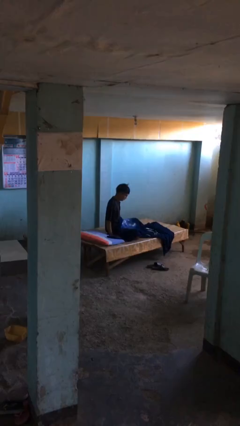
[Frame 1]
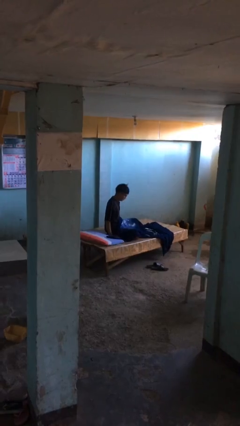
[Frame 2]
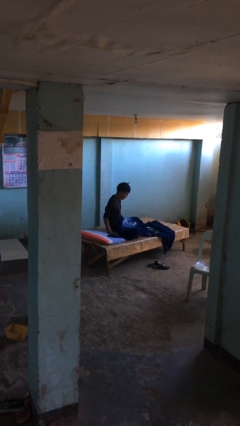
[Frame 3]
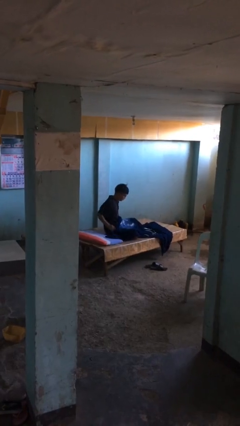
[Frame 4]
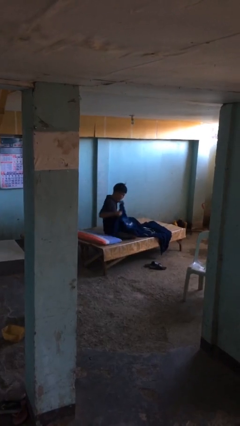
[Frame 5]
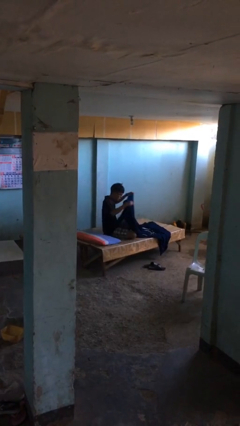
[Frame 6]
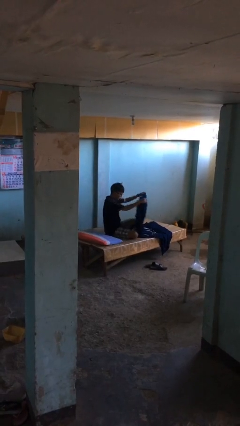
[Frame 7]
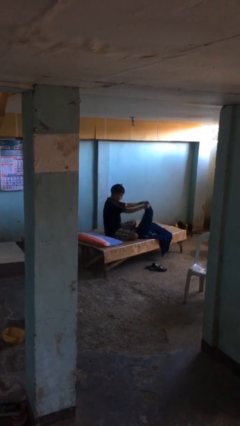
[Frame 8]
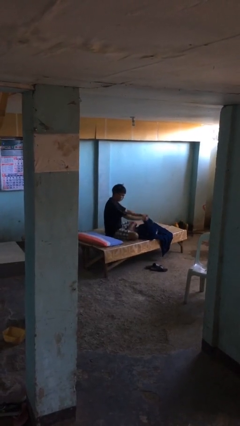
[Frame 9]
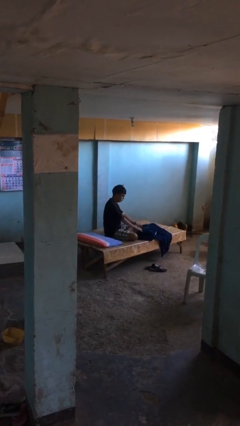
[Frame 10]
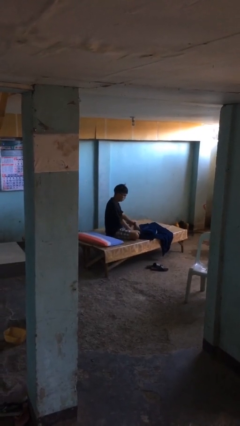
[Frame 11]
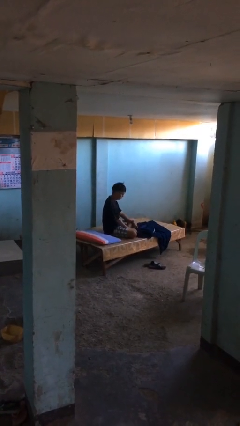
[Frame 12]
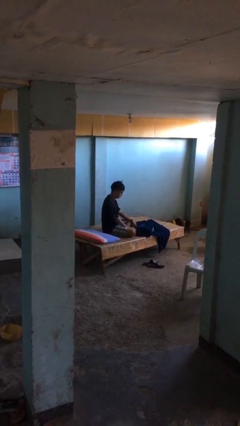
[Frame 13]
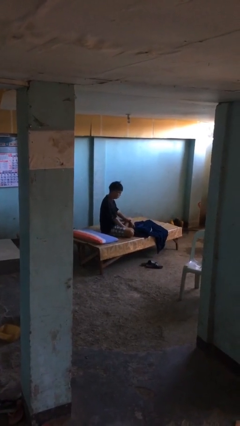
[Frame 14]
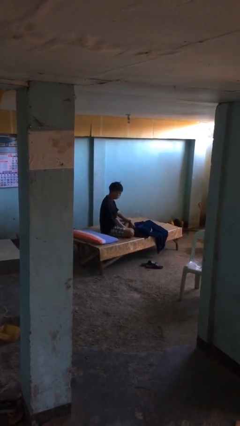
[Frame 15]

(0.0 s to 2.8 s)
person uncovers with blanket

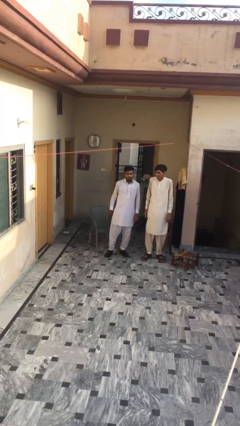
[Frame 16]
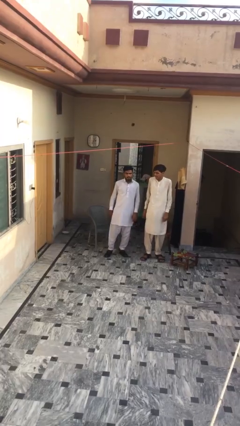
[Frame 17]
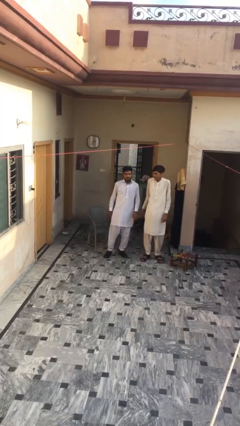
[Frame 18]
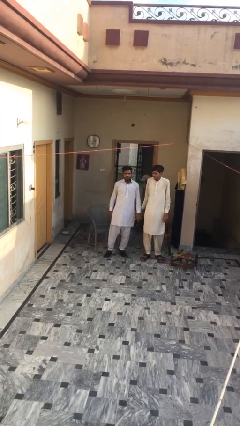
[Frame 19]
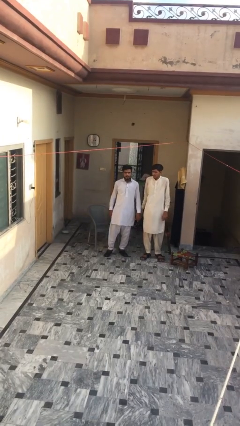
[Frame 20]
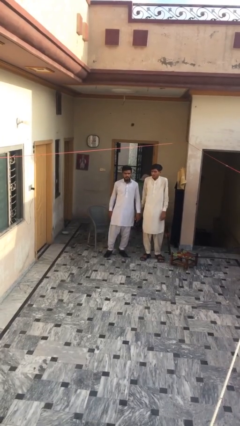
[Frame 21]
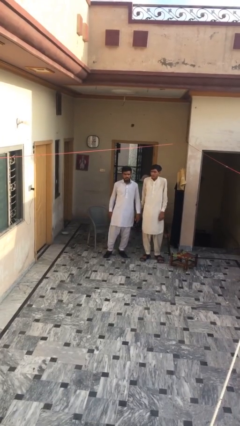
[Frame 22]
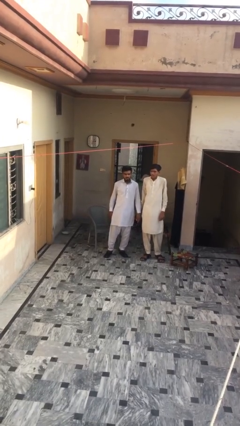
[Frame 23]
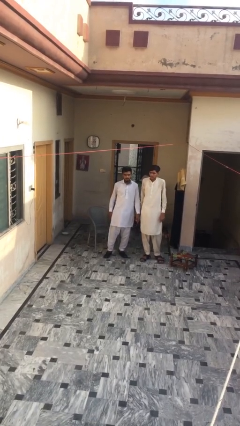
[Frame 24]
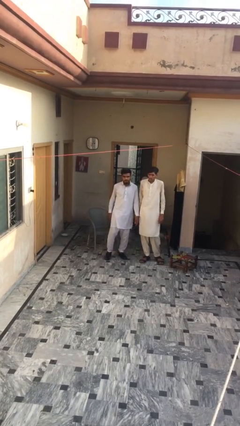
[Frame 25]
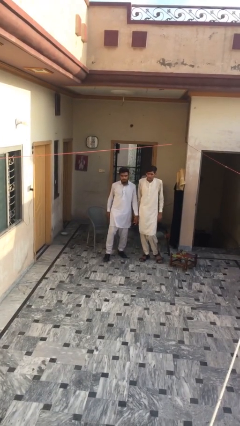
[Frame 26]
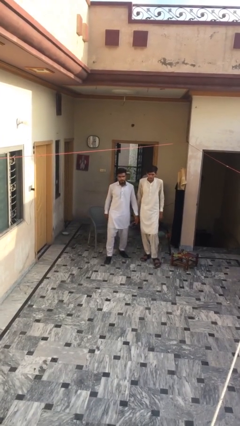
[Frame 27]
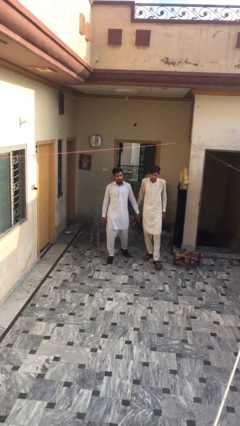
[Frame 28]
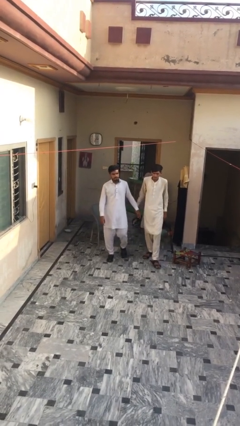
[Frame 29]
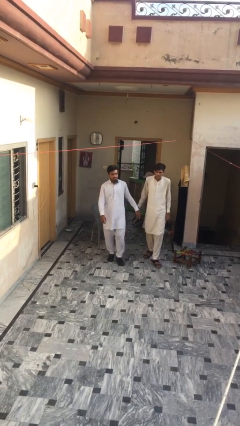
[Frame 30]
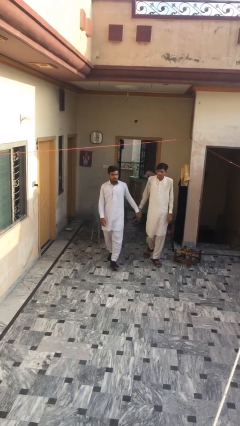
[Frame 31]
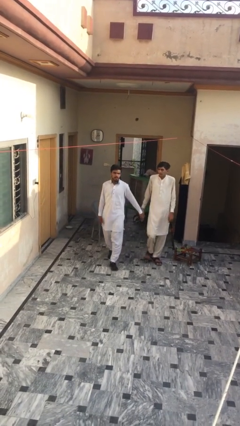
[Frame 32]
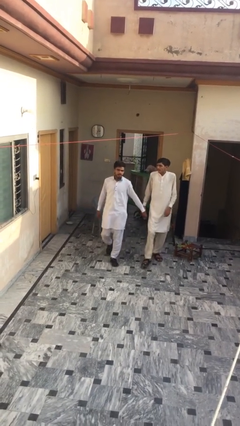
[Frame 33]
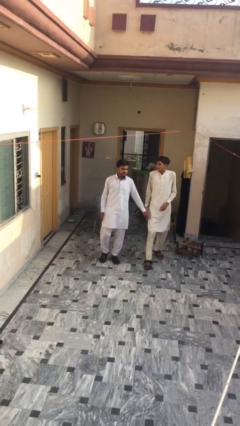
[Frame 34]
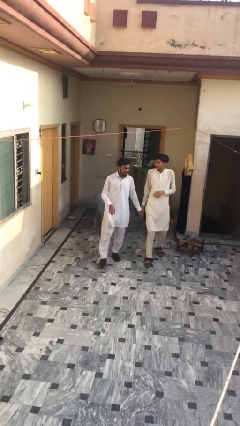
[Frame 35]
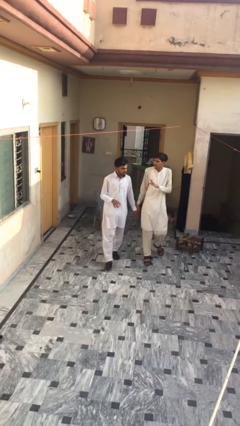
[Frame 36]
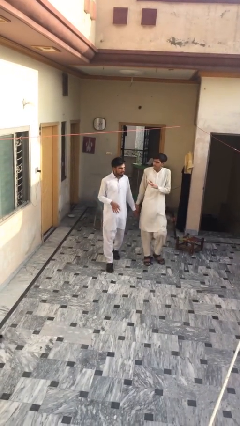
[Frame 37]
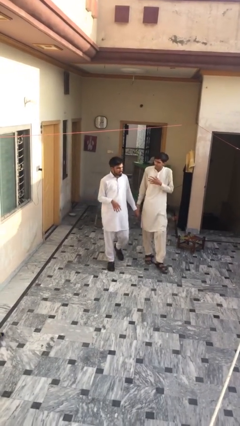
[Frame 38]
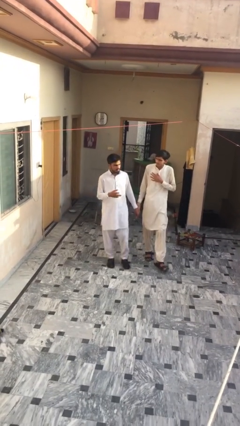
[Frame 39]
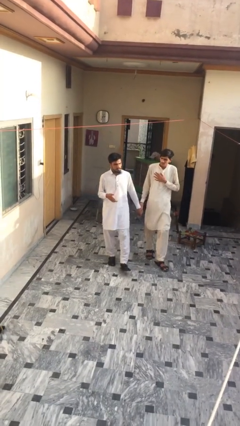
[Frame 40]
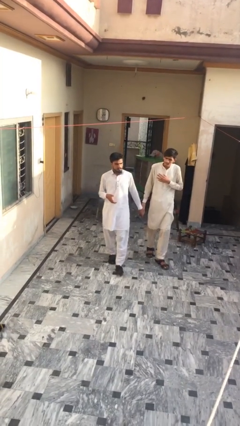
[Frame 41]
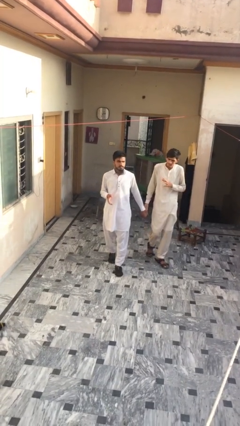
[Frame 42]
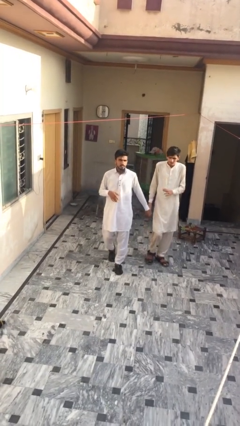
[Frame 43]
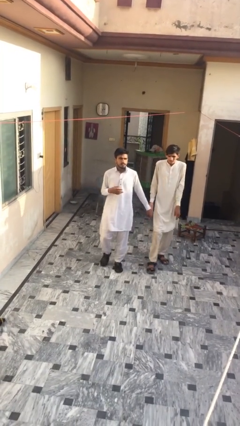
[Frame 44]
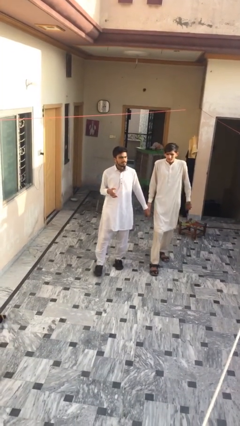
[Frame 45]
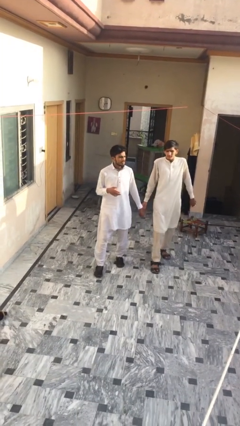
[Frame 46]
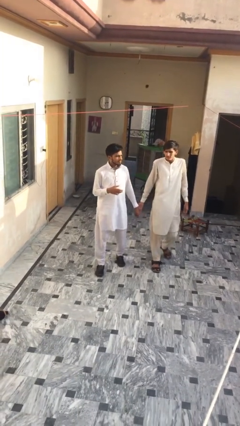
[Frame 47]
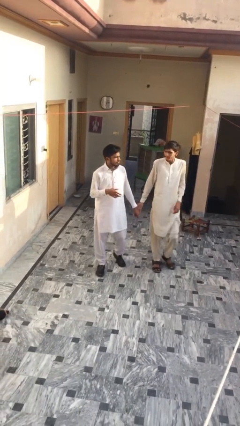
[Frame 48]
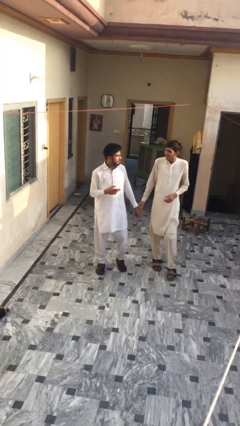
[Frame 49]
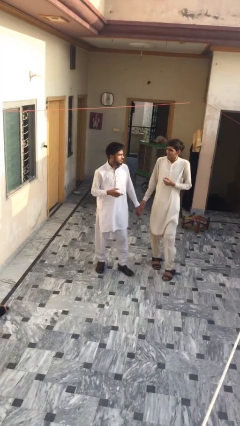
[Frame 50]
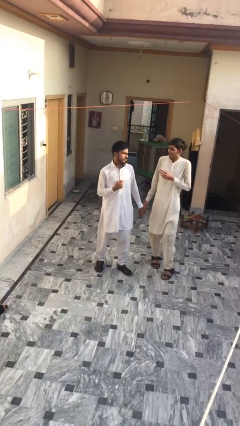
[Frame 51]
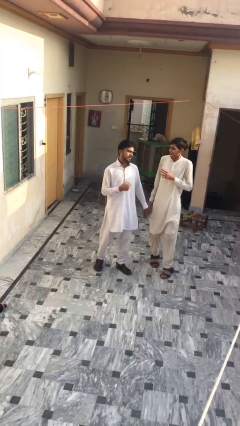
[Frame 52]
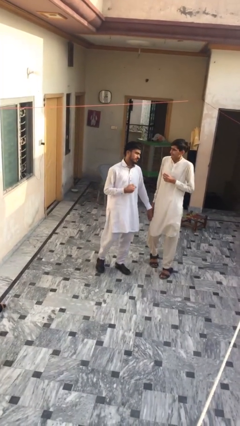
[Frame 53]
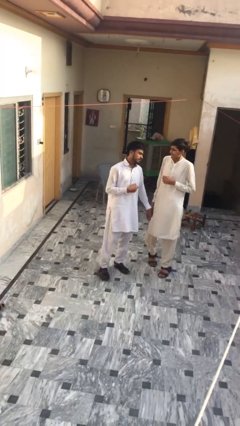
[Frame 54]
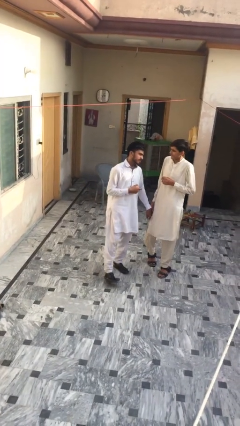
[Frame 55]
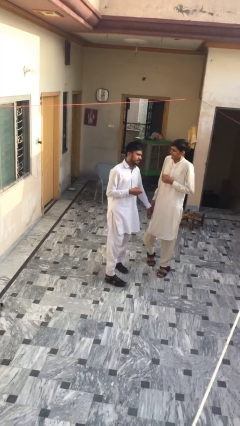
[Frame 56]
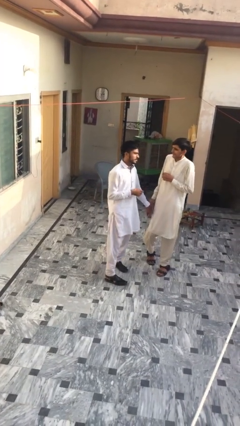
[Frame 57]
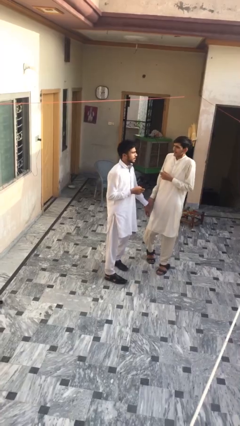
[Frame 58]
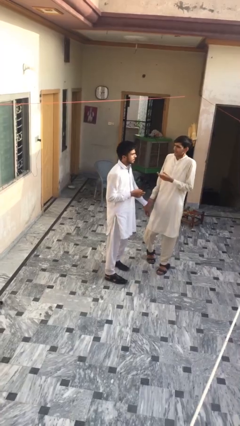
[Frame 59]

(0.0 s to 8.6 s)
person holds hand

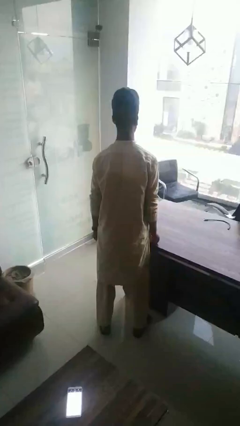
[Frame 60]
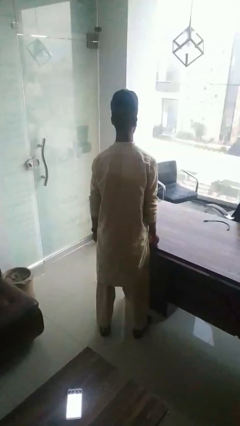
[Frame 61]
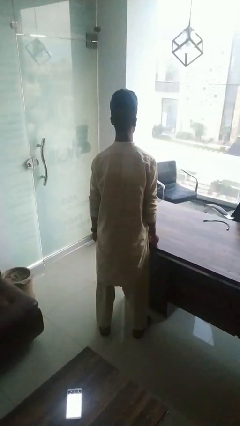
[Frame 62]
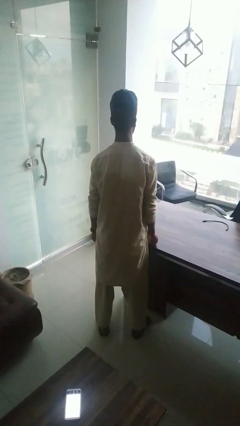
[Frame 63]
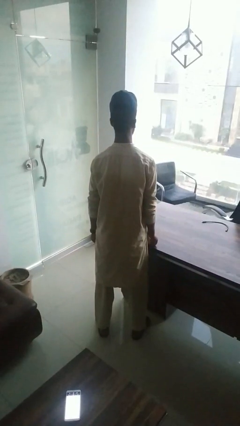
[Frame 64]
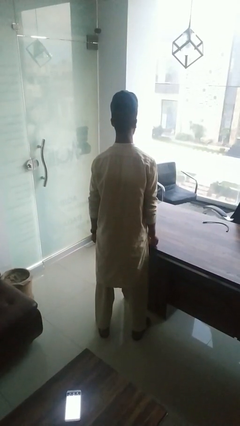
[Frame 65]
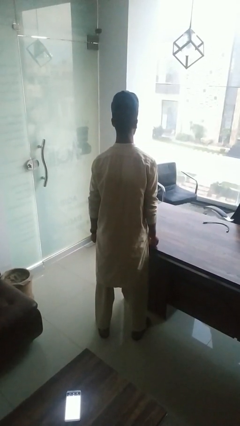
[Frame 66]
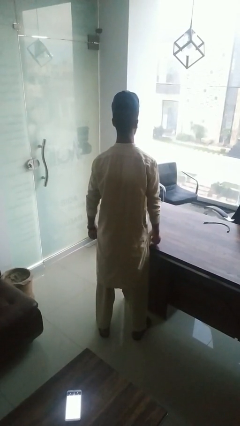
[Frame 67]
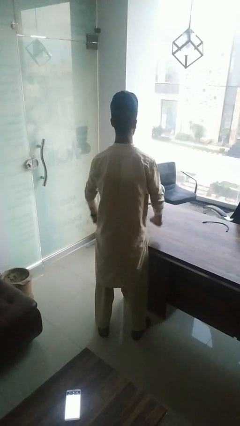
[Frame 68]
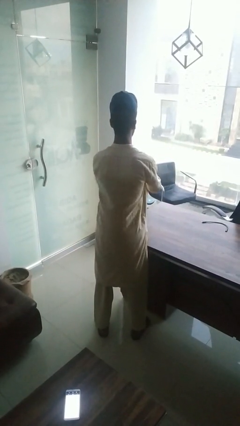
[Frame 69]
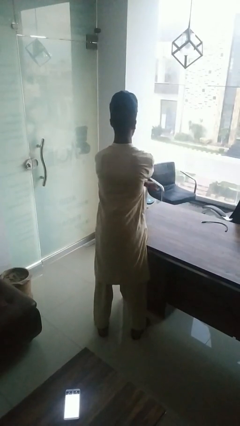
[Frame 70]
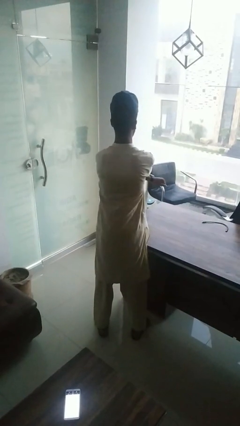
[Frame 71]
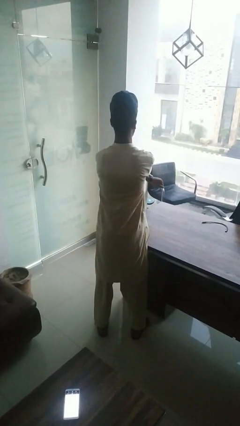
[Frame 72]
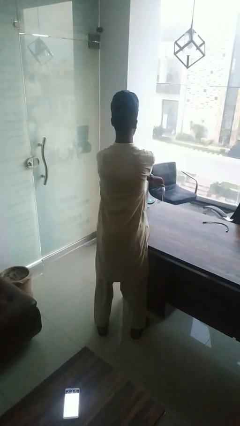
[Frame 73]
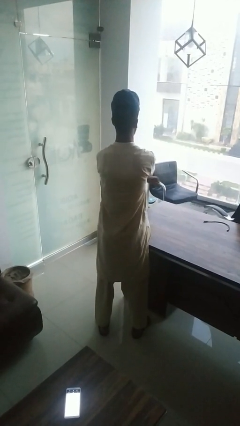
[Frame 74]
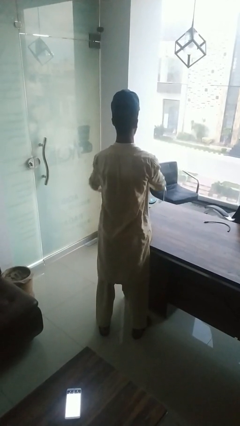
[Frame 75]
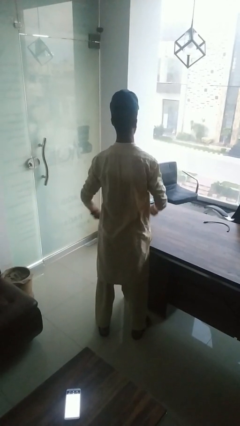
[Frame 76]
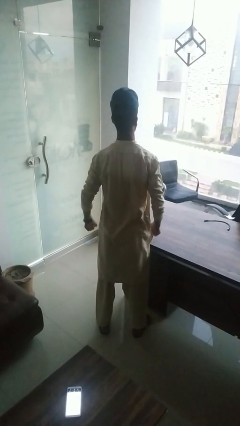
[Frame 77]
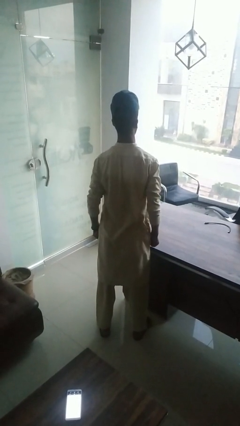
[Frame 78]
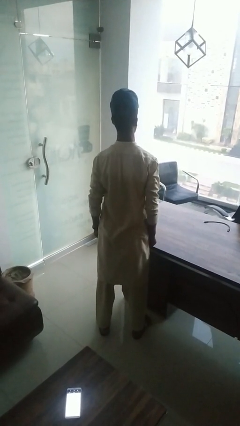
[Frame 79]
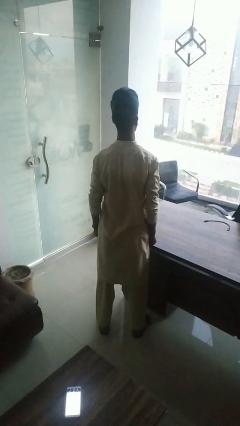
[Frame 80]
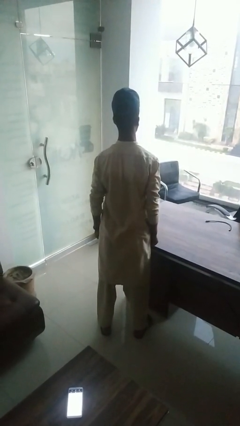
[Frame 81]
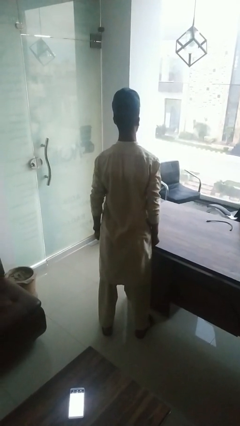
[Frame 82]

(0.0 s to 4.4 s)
person gestures arms x

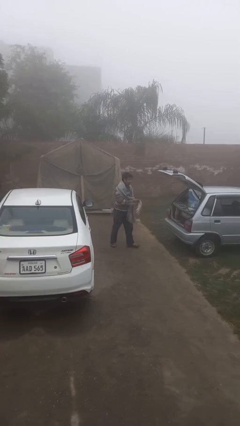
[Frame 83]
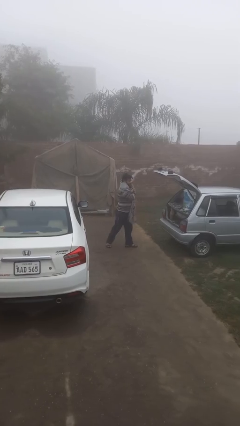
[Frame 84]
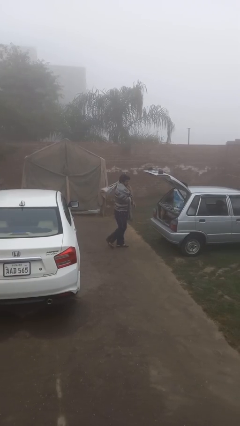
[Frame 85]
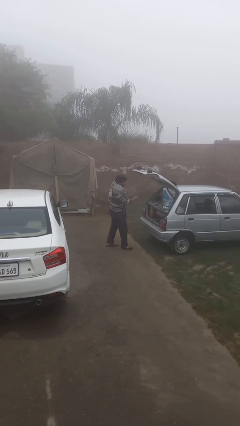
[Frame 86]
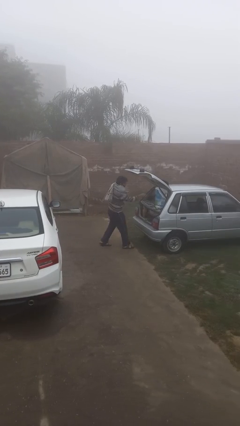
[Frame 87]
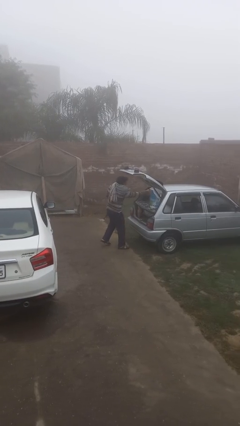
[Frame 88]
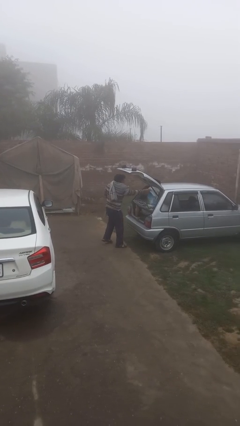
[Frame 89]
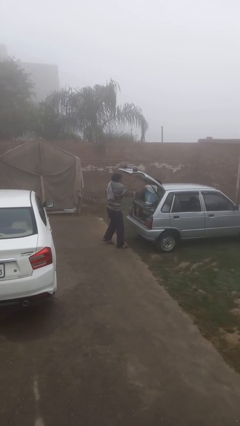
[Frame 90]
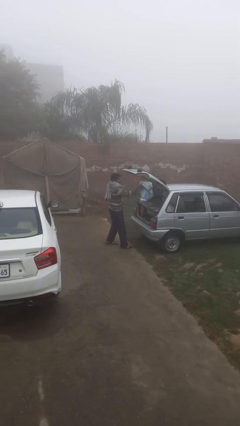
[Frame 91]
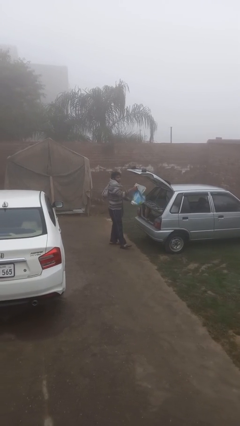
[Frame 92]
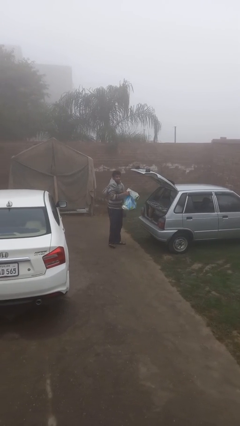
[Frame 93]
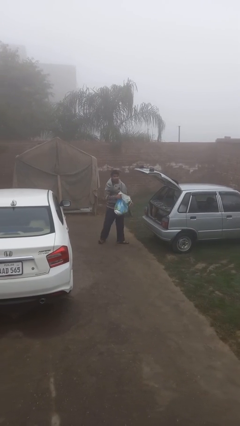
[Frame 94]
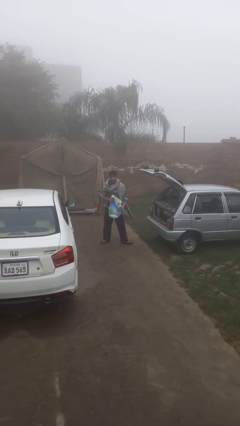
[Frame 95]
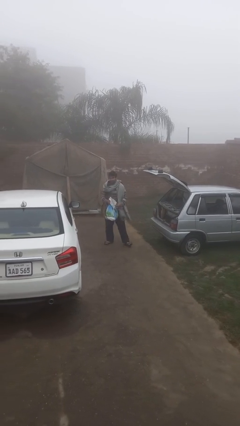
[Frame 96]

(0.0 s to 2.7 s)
person unloads car
